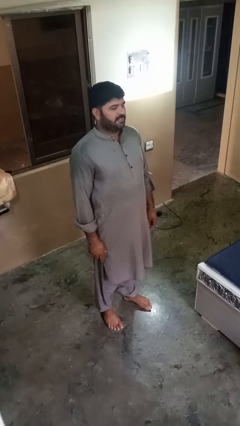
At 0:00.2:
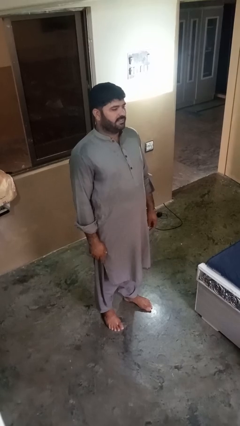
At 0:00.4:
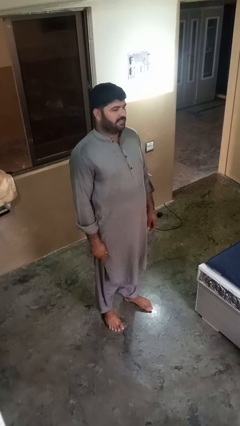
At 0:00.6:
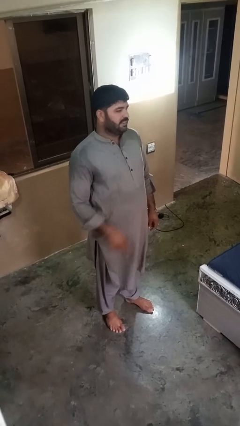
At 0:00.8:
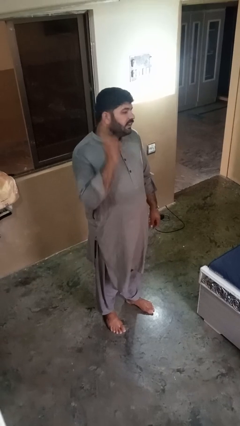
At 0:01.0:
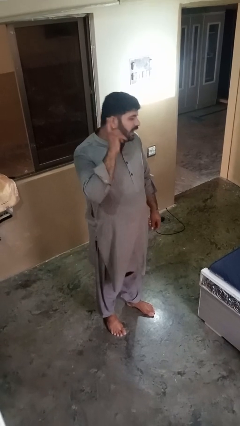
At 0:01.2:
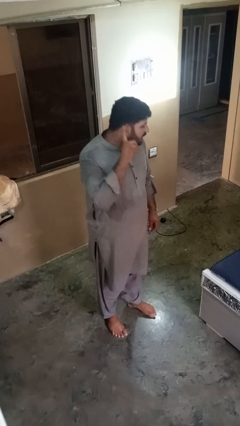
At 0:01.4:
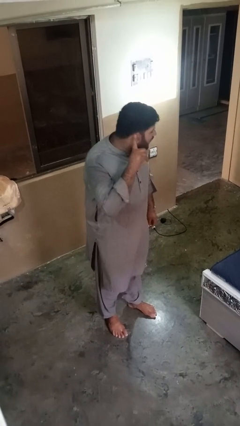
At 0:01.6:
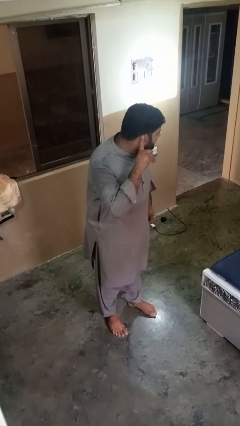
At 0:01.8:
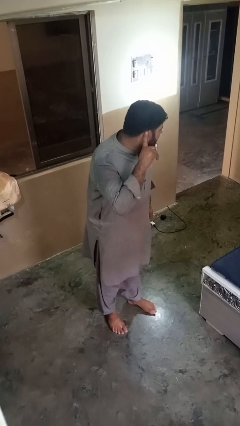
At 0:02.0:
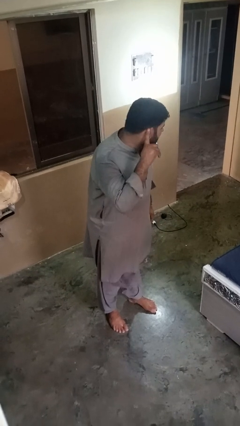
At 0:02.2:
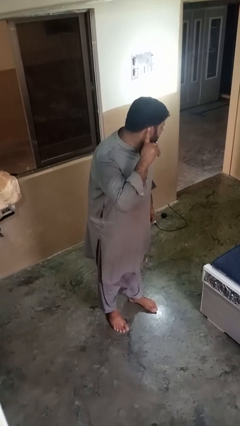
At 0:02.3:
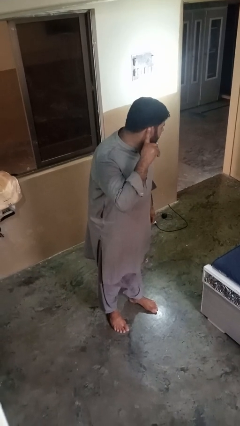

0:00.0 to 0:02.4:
person gestures listen closely

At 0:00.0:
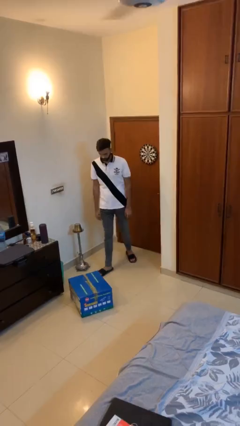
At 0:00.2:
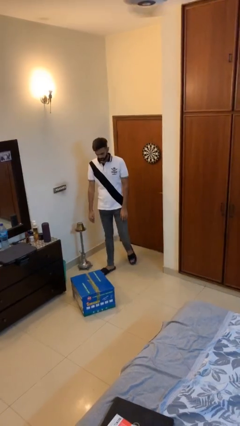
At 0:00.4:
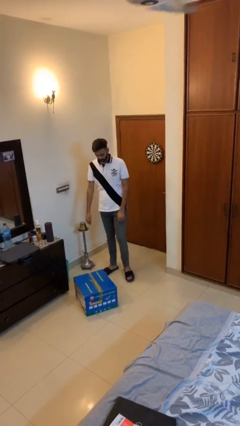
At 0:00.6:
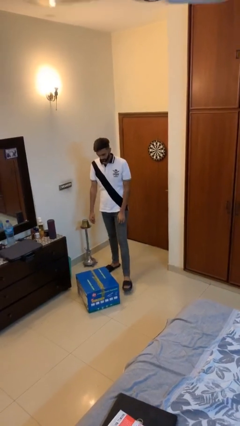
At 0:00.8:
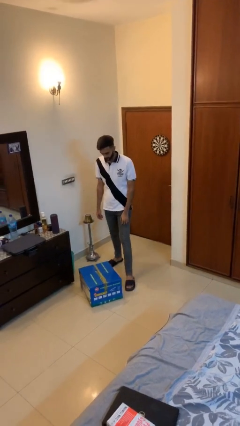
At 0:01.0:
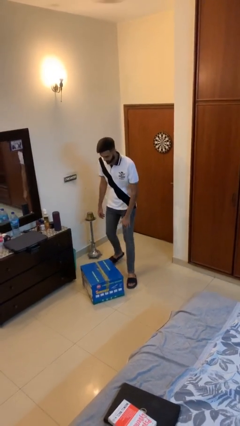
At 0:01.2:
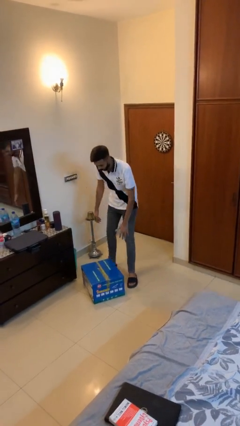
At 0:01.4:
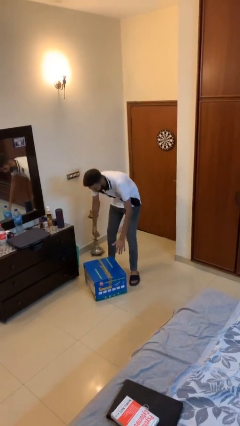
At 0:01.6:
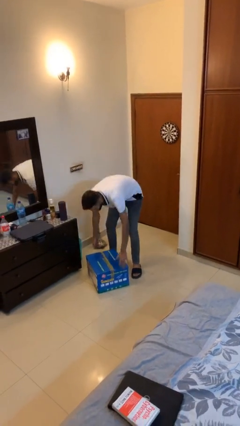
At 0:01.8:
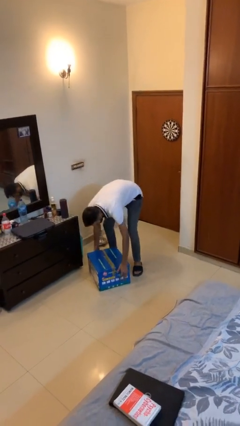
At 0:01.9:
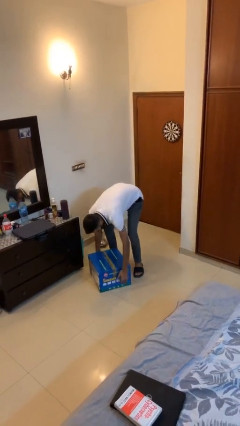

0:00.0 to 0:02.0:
person picks up object from floor

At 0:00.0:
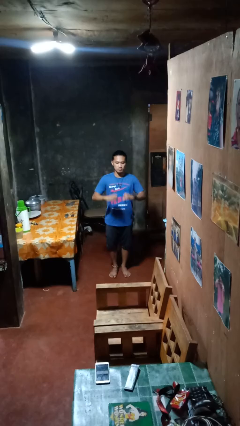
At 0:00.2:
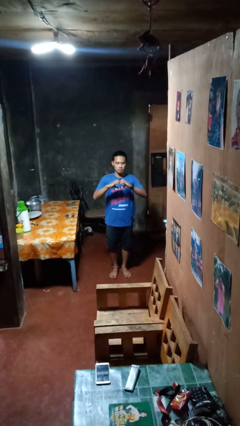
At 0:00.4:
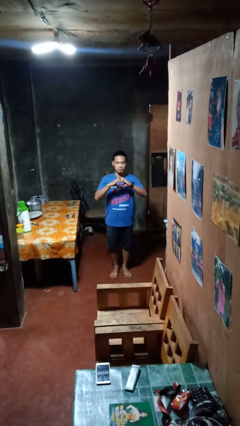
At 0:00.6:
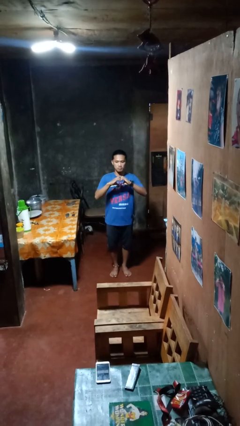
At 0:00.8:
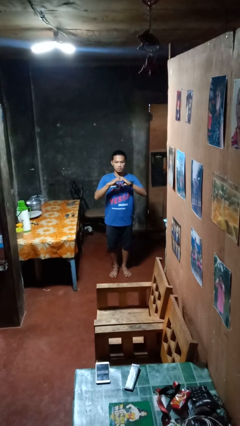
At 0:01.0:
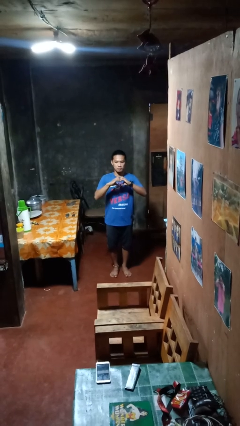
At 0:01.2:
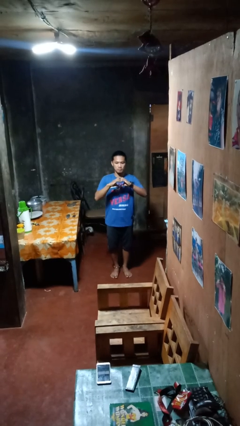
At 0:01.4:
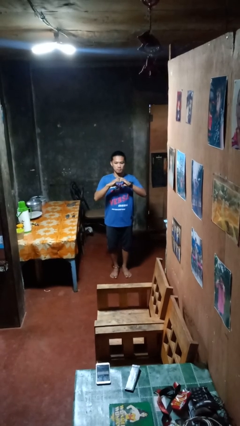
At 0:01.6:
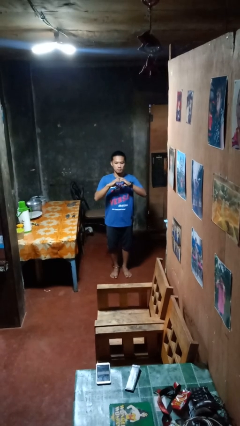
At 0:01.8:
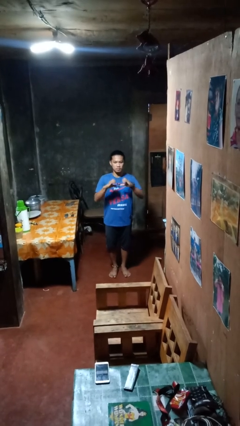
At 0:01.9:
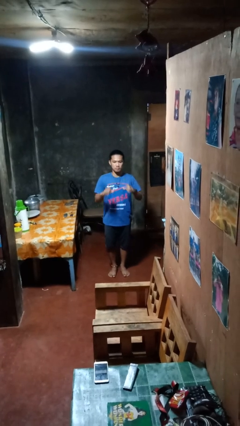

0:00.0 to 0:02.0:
person gestures heart

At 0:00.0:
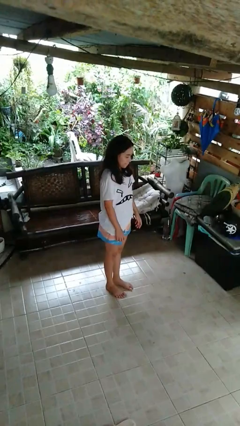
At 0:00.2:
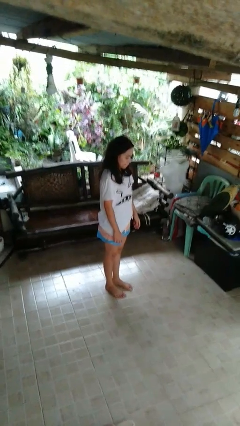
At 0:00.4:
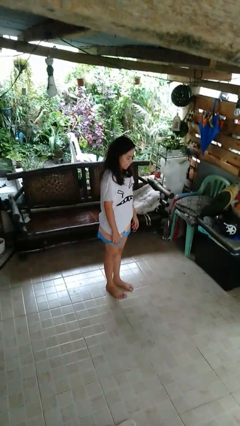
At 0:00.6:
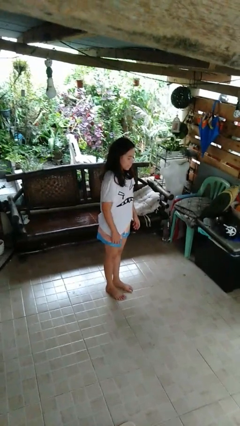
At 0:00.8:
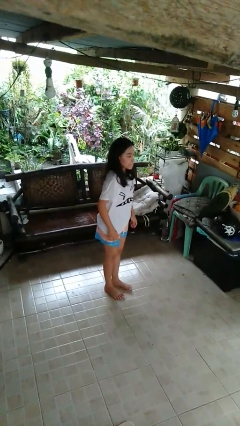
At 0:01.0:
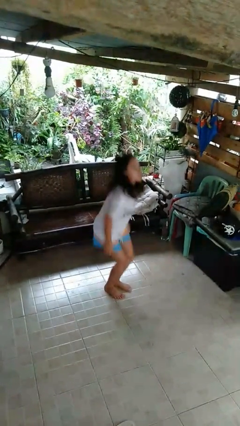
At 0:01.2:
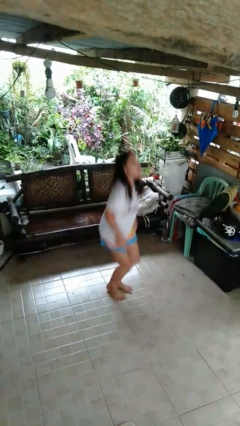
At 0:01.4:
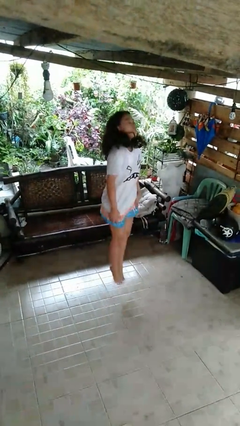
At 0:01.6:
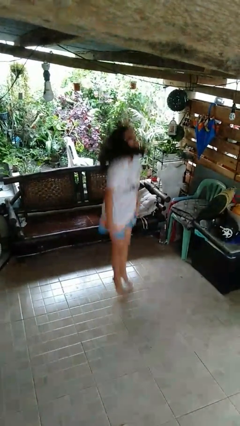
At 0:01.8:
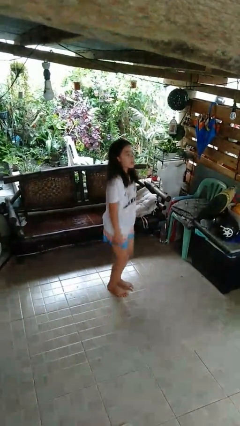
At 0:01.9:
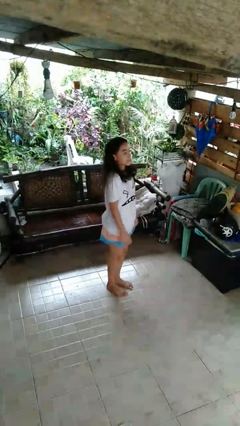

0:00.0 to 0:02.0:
person jumps

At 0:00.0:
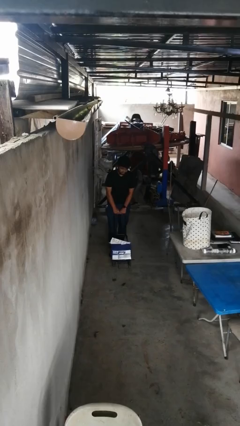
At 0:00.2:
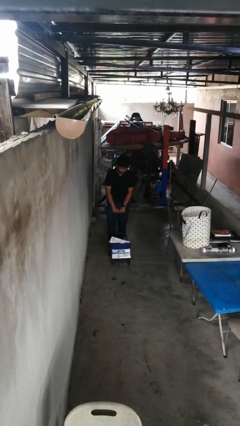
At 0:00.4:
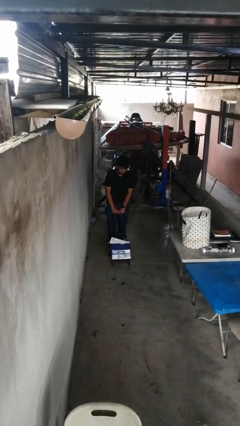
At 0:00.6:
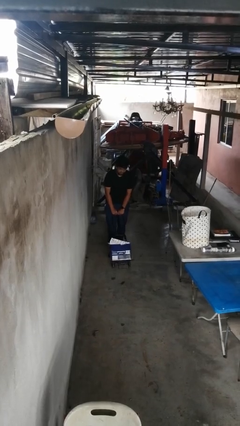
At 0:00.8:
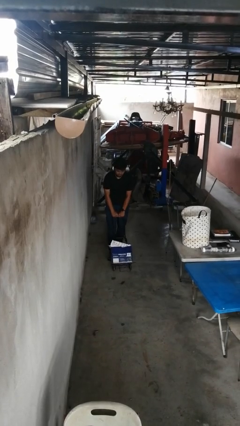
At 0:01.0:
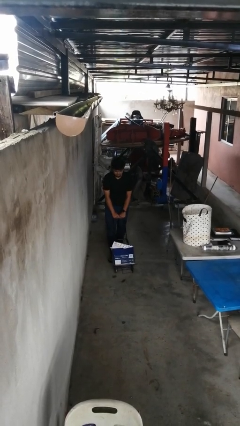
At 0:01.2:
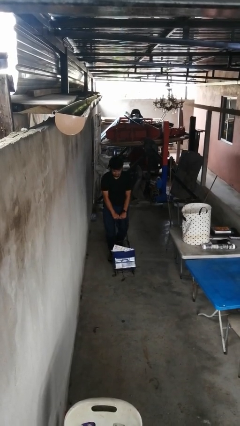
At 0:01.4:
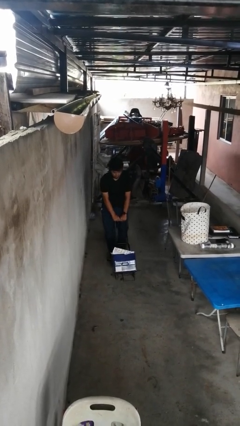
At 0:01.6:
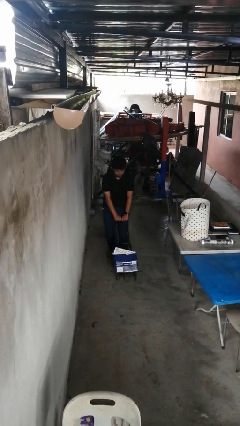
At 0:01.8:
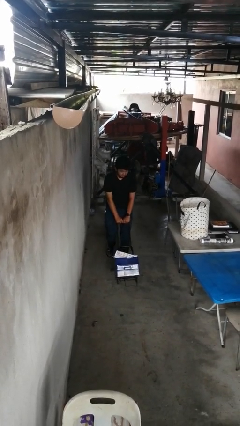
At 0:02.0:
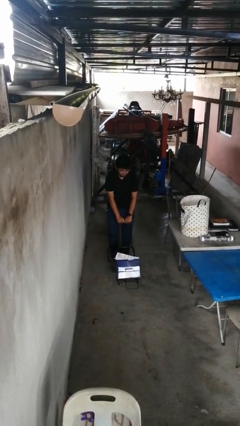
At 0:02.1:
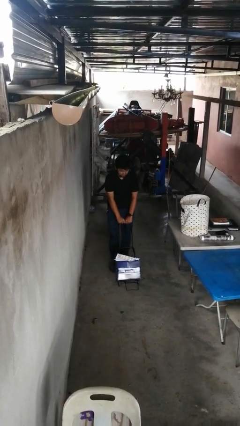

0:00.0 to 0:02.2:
person pushes wheeled cart

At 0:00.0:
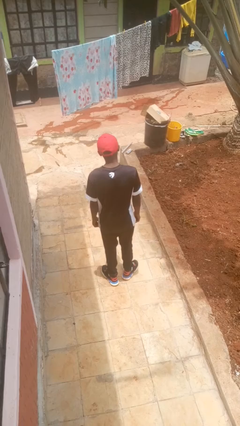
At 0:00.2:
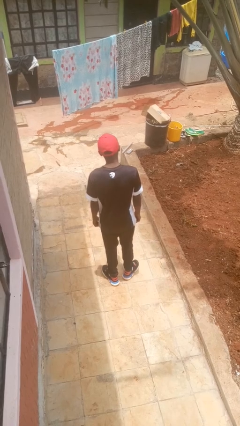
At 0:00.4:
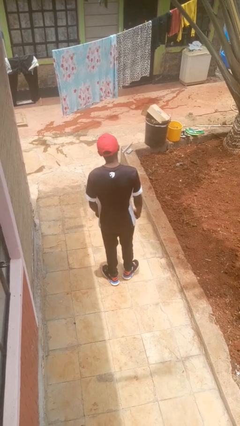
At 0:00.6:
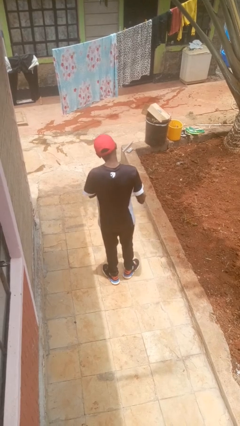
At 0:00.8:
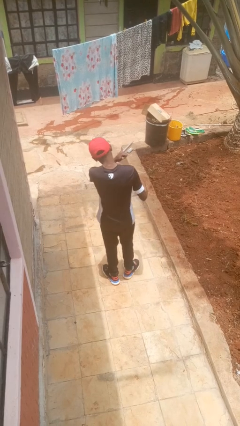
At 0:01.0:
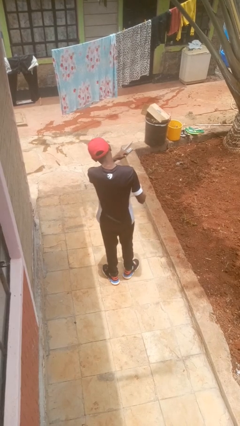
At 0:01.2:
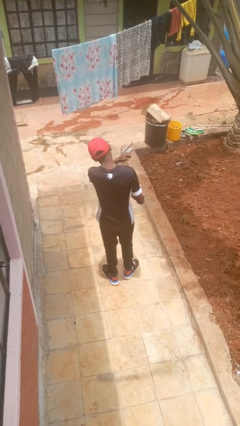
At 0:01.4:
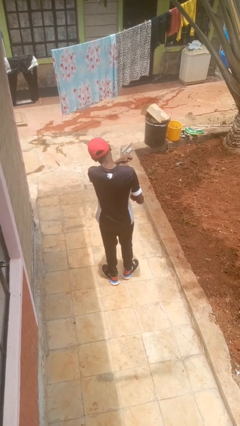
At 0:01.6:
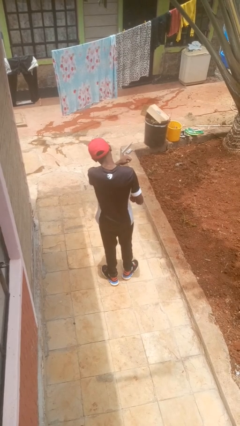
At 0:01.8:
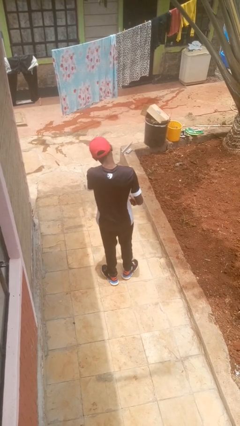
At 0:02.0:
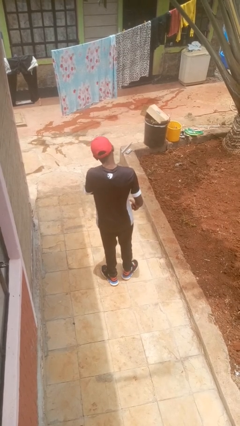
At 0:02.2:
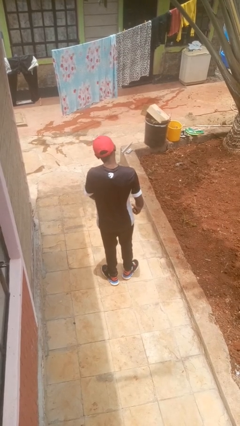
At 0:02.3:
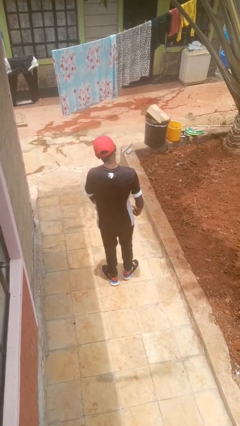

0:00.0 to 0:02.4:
person gestures behind me

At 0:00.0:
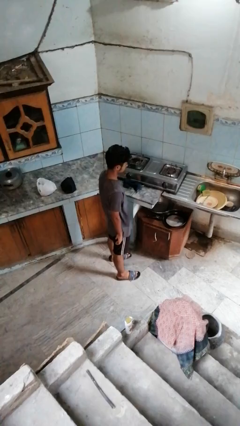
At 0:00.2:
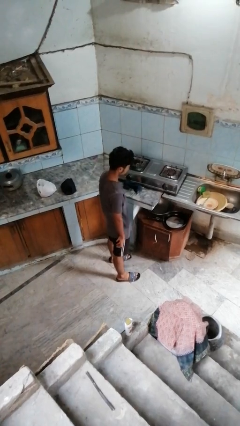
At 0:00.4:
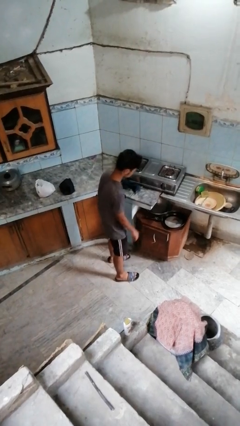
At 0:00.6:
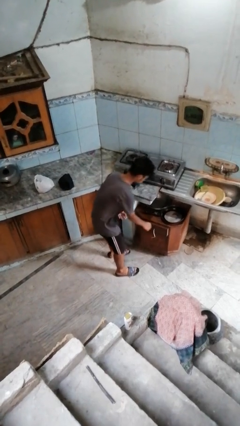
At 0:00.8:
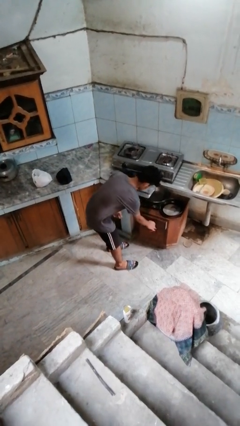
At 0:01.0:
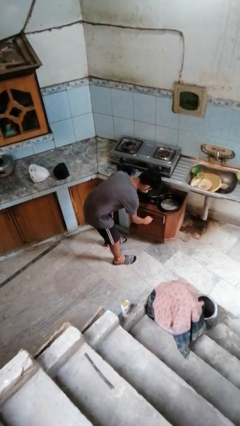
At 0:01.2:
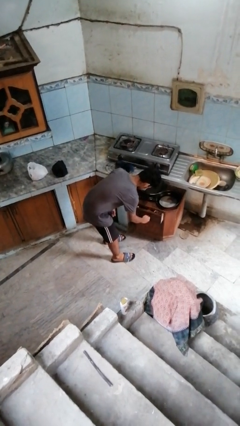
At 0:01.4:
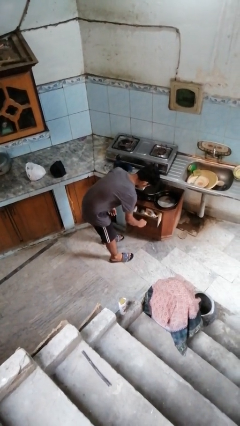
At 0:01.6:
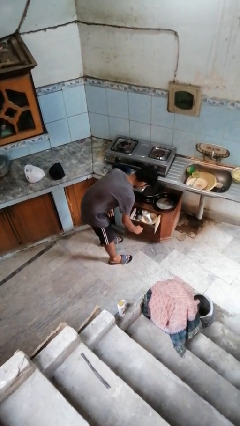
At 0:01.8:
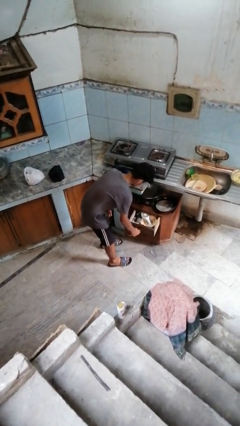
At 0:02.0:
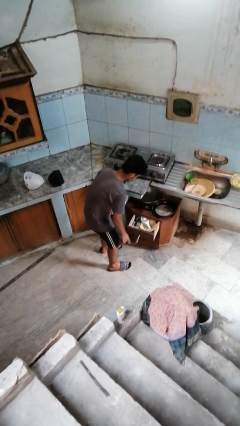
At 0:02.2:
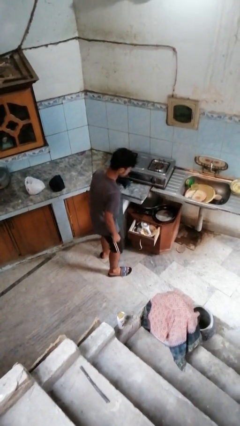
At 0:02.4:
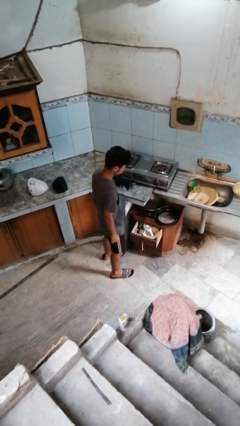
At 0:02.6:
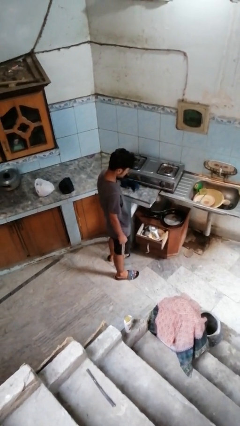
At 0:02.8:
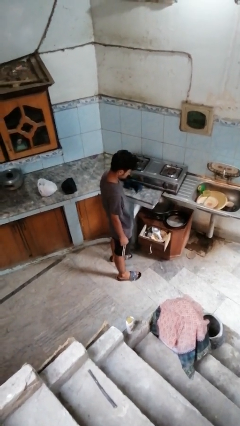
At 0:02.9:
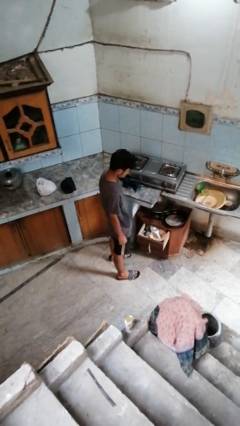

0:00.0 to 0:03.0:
person opens kitchen drawer

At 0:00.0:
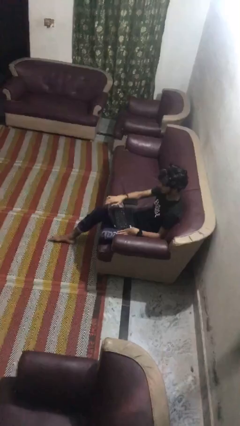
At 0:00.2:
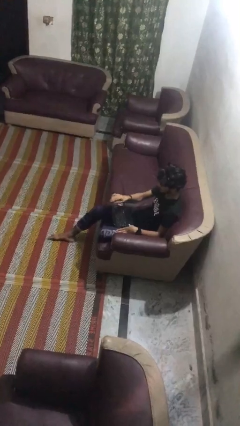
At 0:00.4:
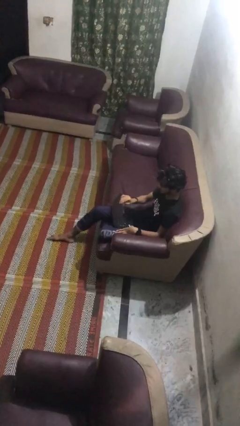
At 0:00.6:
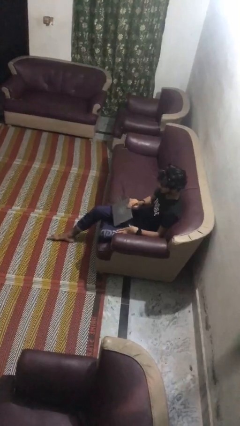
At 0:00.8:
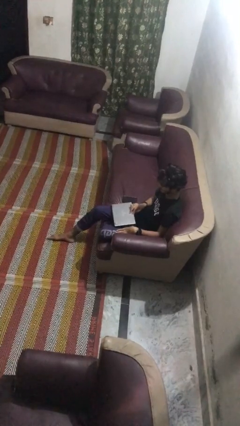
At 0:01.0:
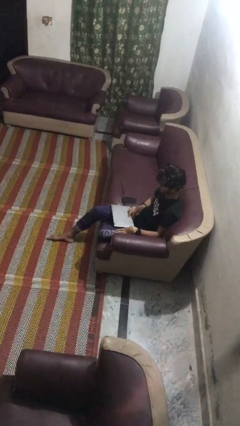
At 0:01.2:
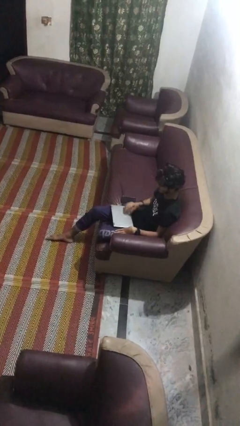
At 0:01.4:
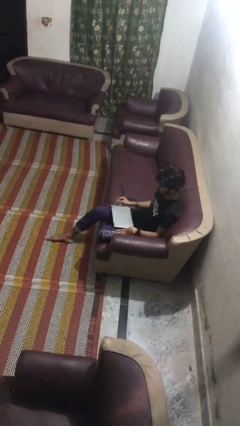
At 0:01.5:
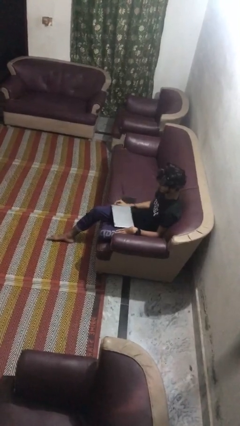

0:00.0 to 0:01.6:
person closes laptop
